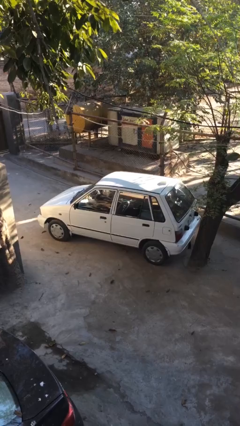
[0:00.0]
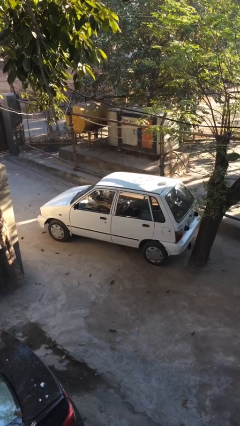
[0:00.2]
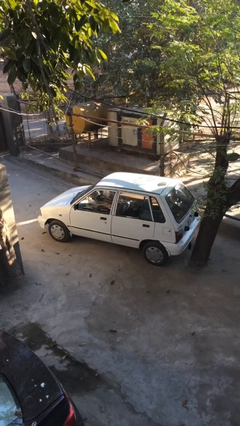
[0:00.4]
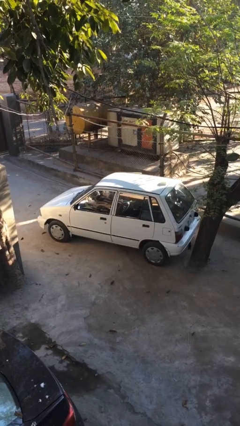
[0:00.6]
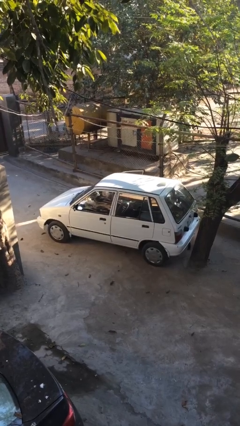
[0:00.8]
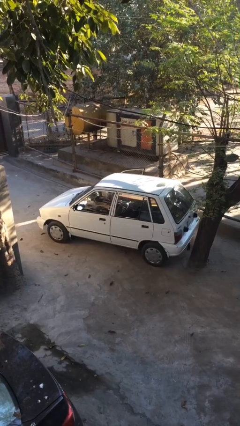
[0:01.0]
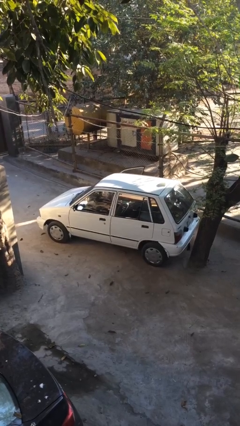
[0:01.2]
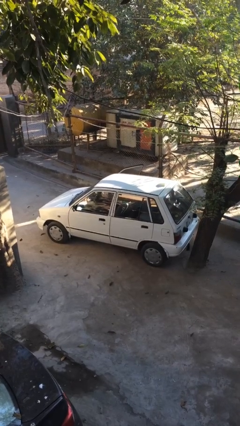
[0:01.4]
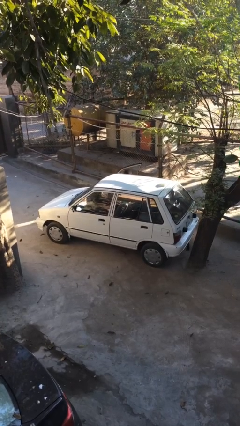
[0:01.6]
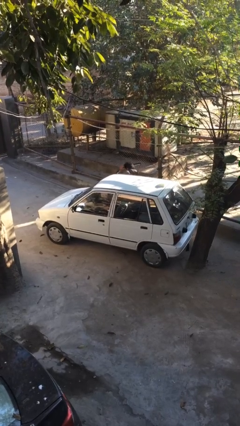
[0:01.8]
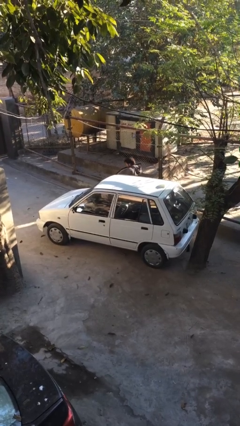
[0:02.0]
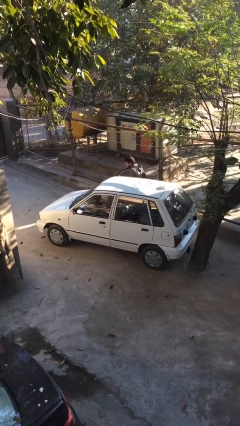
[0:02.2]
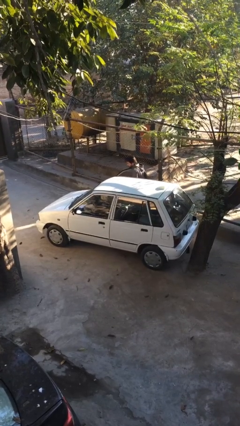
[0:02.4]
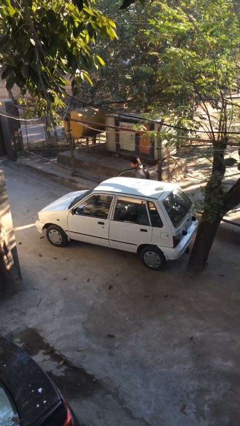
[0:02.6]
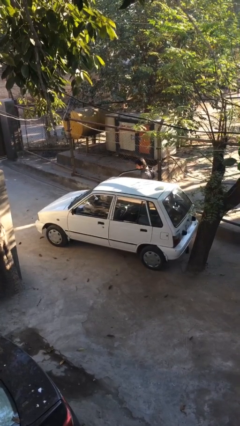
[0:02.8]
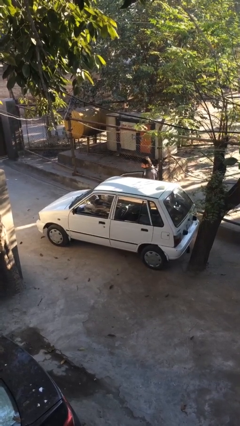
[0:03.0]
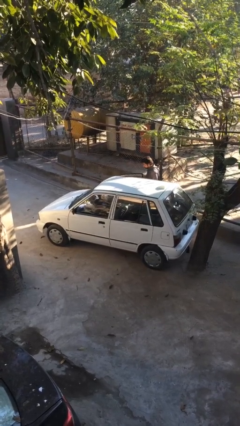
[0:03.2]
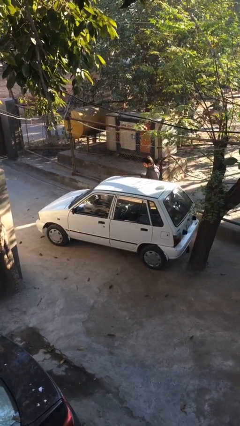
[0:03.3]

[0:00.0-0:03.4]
car drops off person

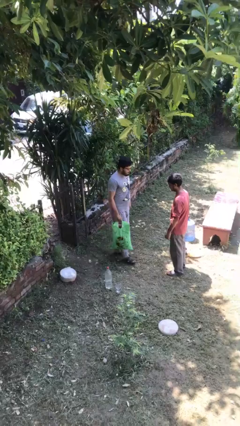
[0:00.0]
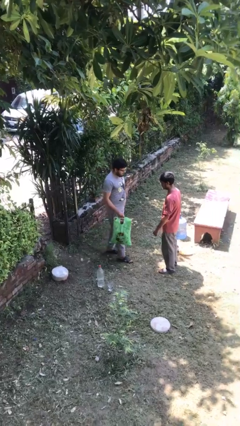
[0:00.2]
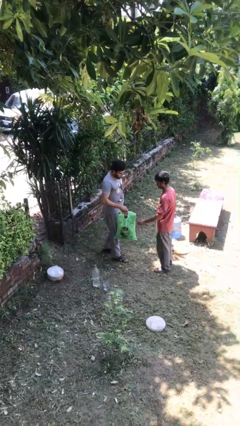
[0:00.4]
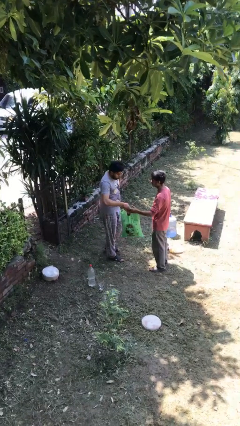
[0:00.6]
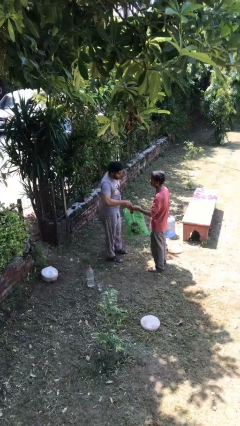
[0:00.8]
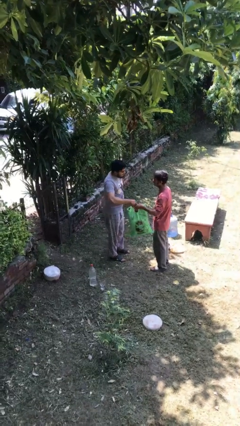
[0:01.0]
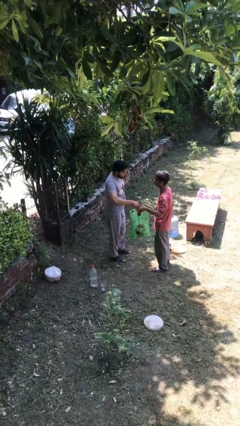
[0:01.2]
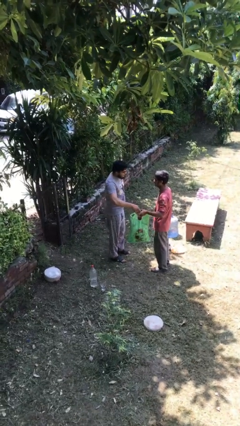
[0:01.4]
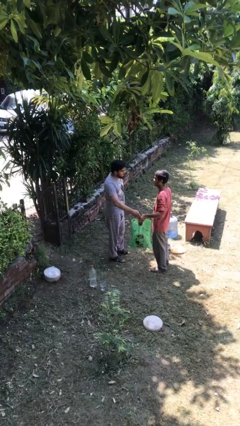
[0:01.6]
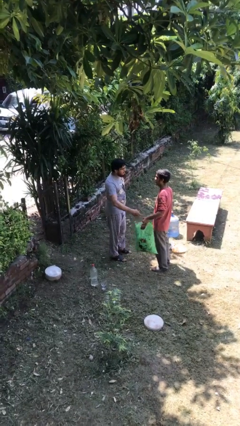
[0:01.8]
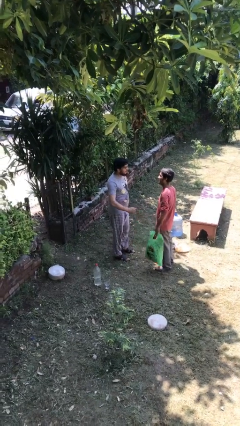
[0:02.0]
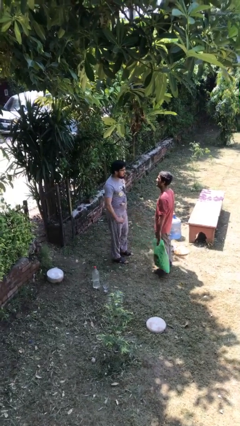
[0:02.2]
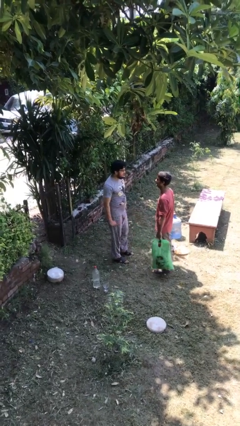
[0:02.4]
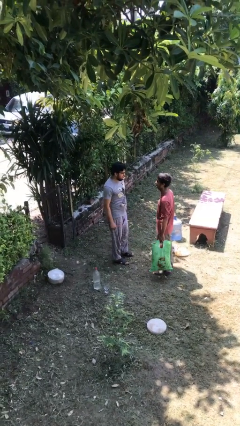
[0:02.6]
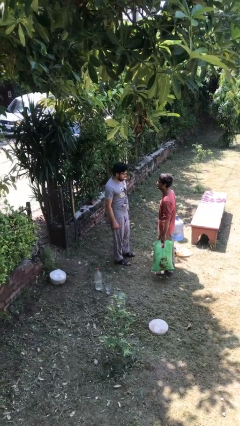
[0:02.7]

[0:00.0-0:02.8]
person transfers object to person

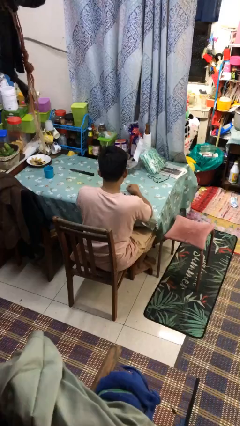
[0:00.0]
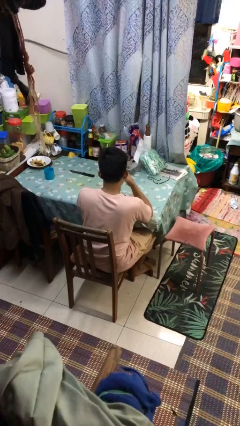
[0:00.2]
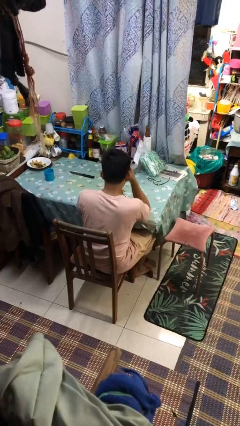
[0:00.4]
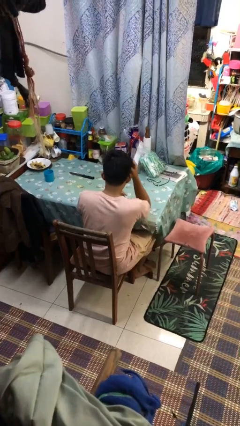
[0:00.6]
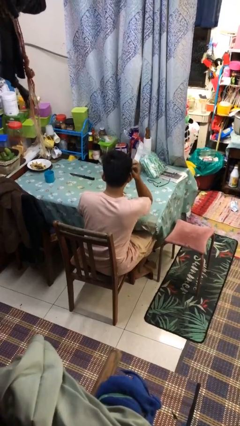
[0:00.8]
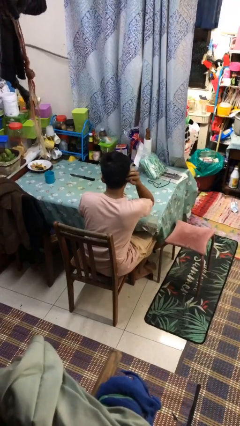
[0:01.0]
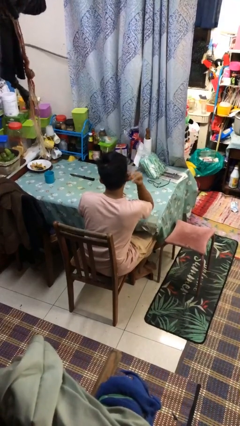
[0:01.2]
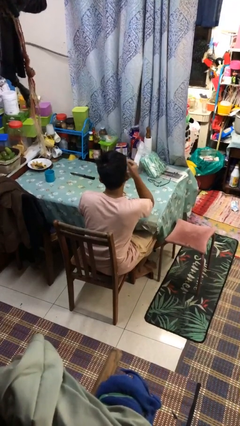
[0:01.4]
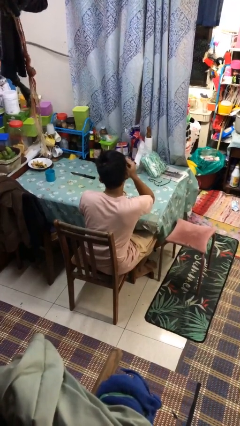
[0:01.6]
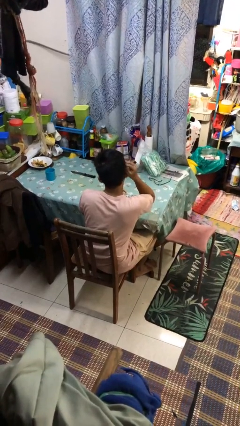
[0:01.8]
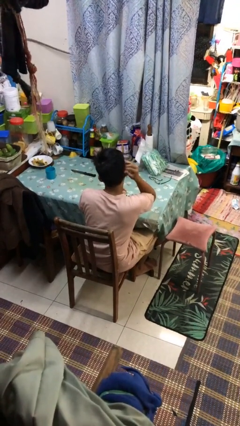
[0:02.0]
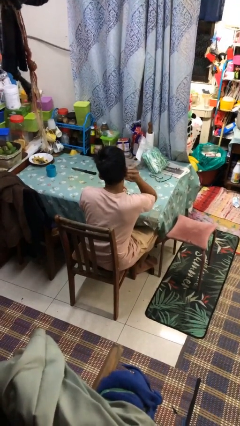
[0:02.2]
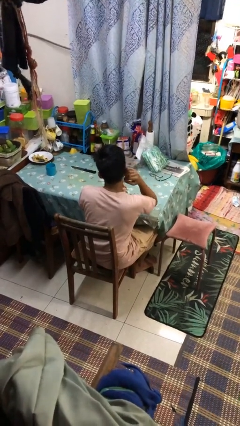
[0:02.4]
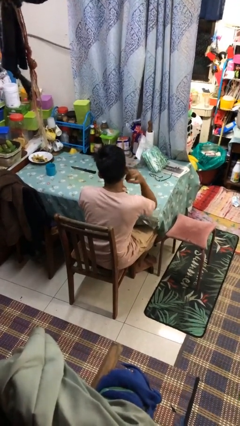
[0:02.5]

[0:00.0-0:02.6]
person strokes hair

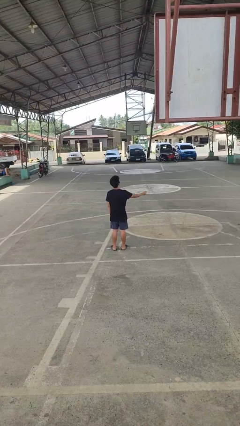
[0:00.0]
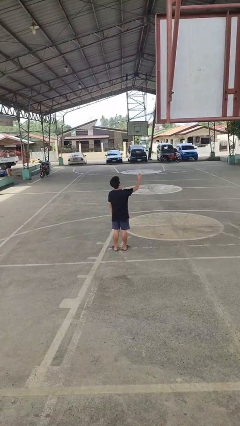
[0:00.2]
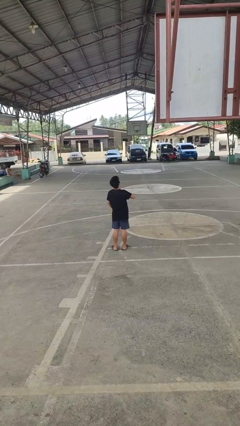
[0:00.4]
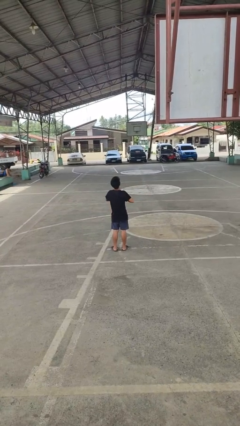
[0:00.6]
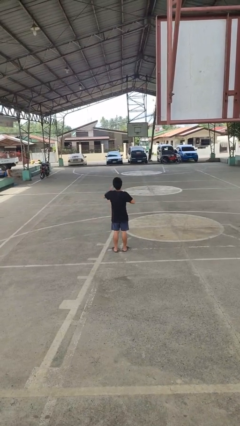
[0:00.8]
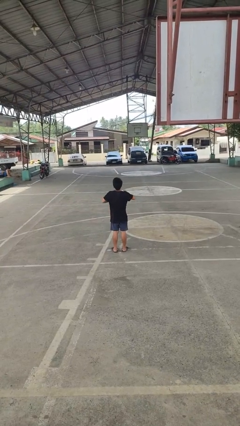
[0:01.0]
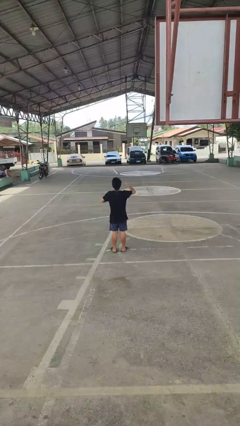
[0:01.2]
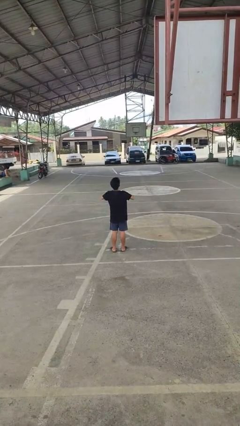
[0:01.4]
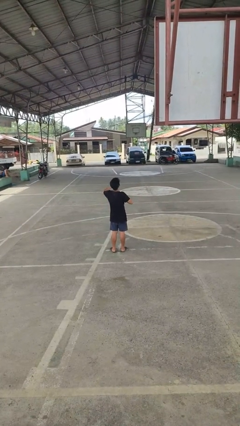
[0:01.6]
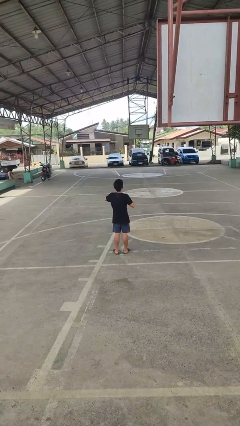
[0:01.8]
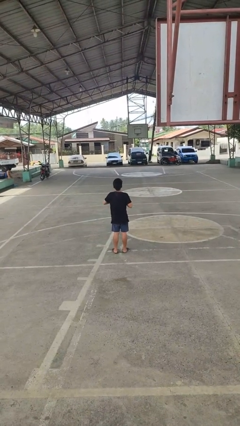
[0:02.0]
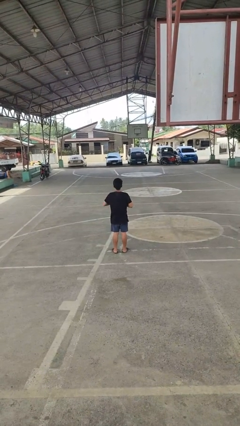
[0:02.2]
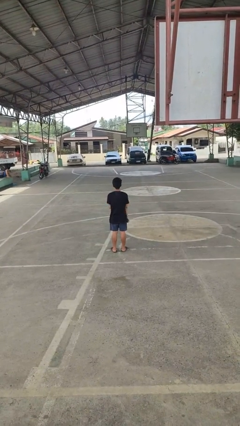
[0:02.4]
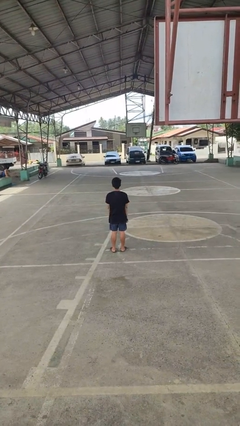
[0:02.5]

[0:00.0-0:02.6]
person drums on chest

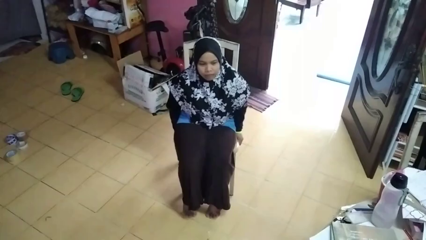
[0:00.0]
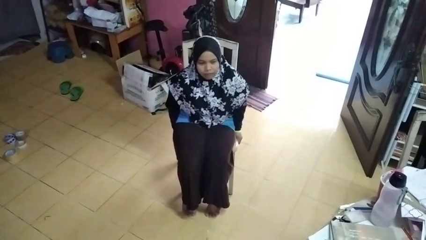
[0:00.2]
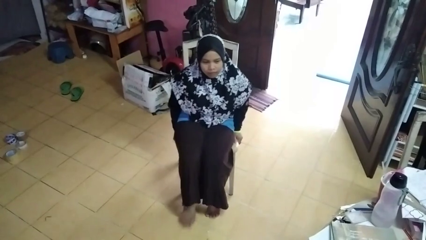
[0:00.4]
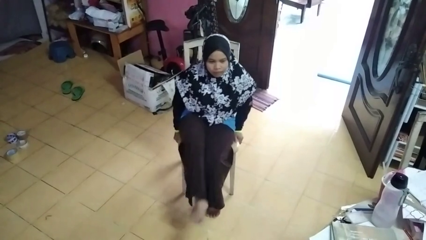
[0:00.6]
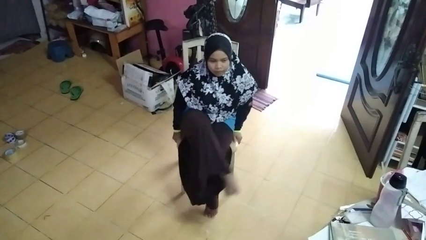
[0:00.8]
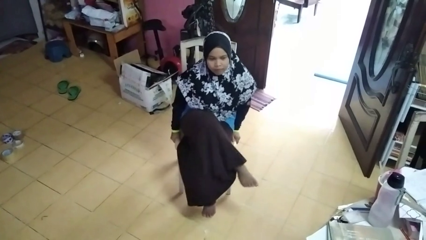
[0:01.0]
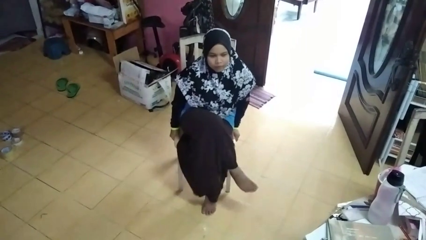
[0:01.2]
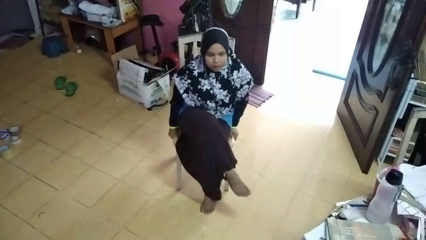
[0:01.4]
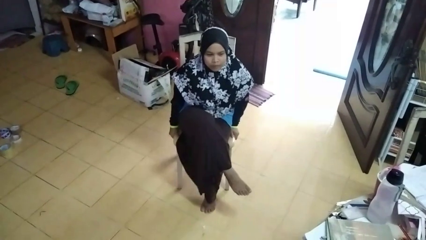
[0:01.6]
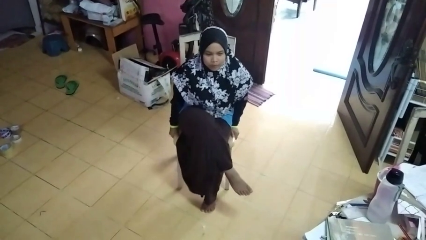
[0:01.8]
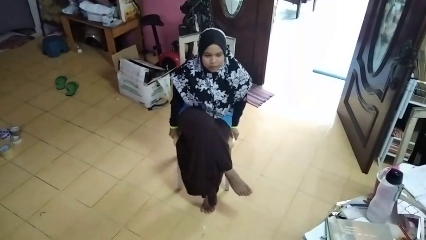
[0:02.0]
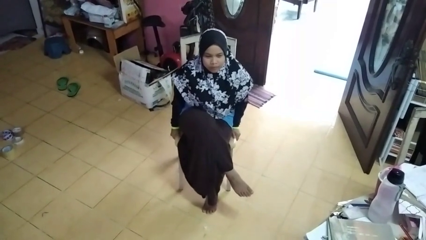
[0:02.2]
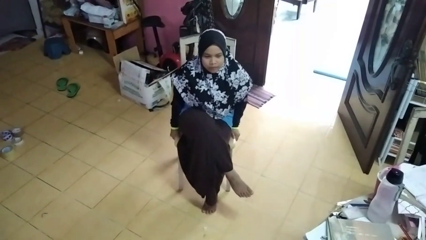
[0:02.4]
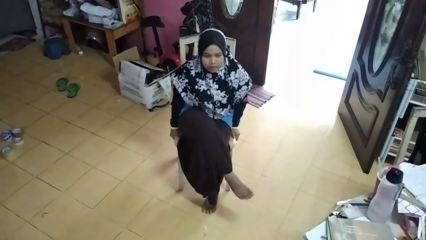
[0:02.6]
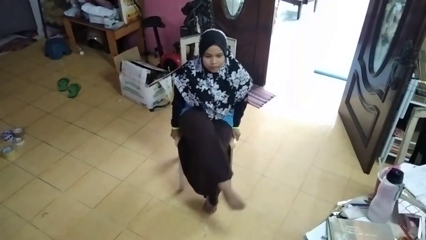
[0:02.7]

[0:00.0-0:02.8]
person crosses legs

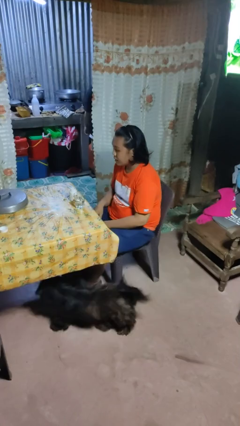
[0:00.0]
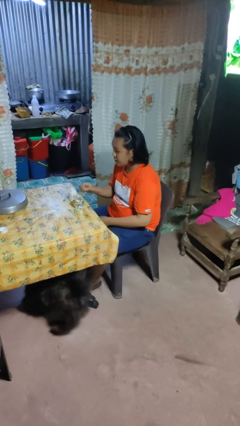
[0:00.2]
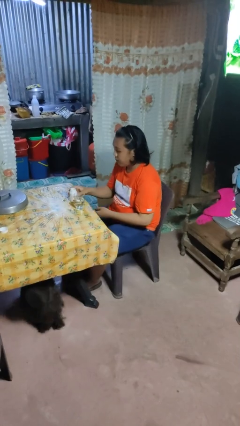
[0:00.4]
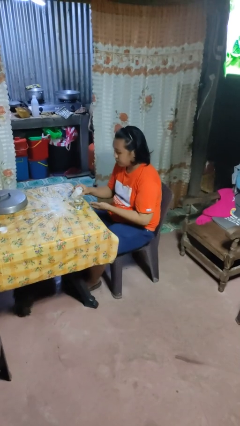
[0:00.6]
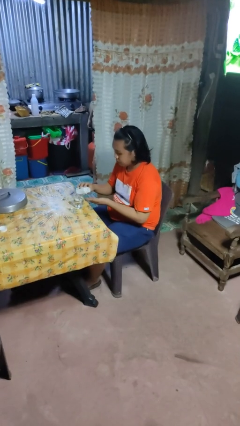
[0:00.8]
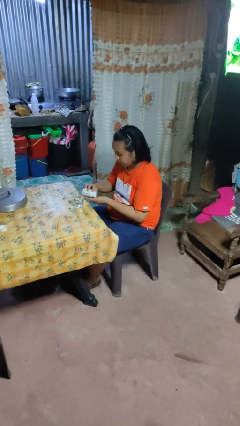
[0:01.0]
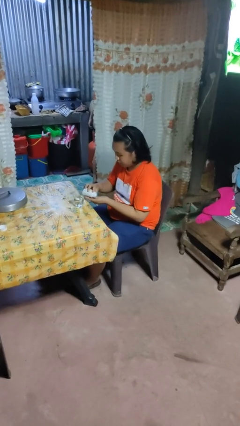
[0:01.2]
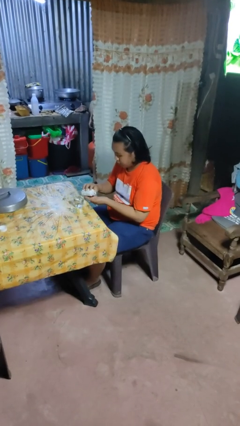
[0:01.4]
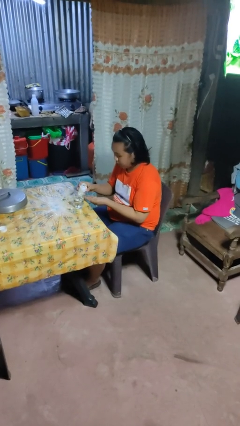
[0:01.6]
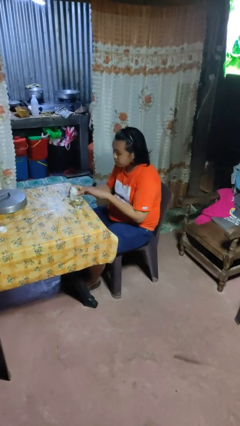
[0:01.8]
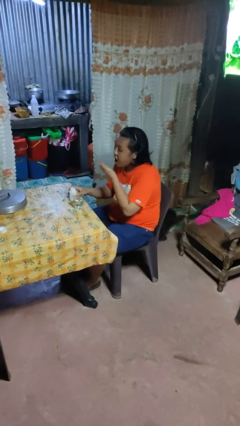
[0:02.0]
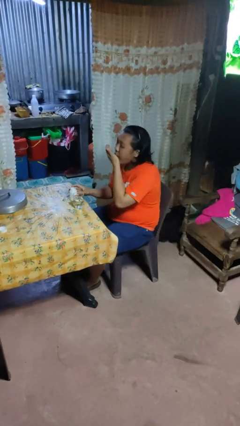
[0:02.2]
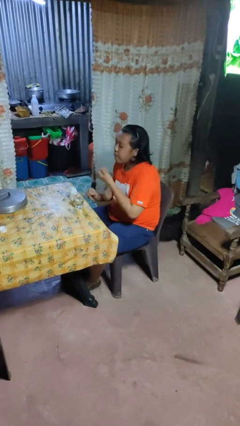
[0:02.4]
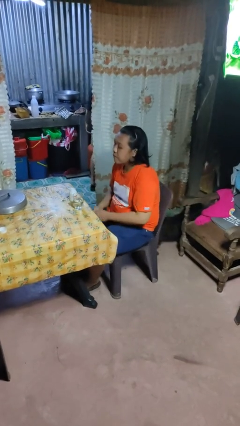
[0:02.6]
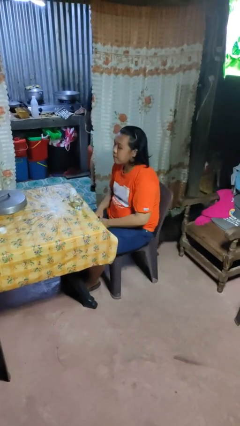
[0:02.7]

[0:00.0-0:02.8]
person takes medicine pills

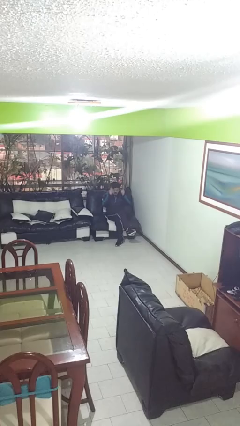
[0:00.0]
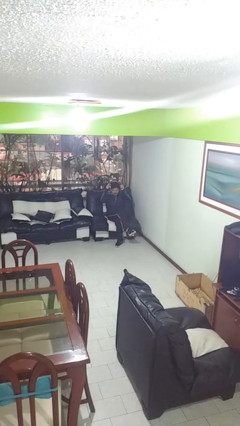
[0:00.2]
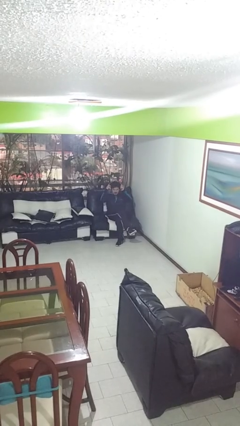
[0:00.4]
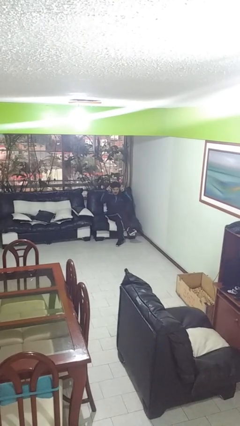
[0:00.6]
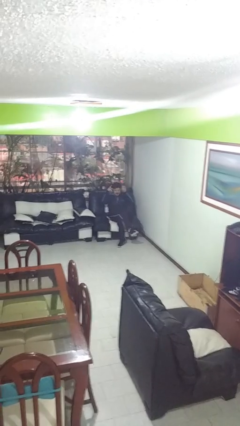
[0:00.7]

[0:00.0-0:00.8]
person puts on headphones
